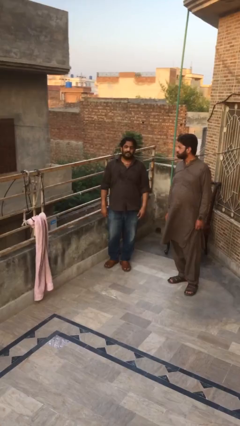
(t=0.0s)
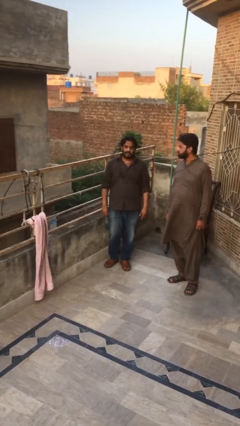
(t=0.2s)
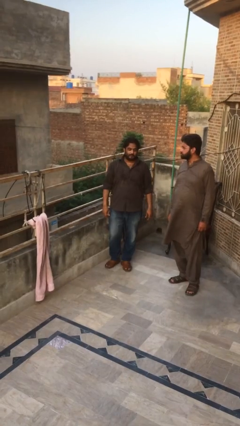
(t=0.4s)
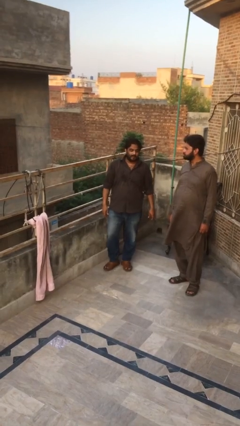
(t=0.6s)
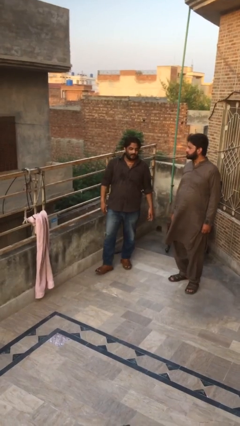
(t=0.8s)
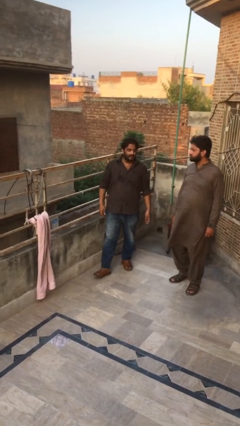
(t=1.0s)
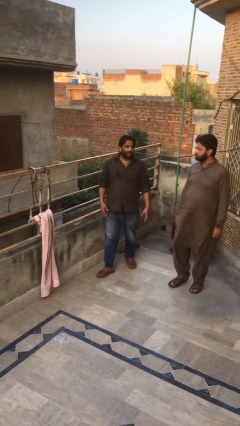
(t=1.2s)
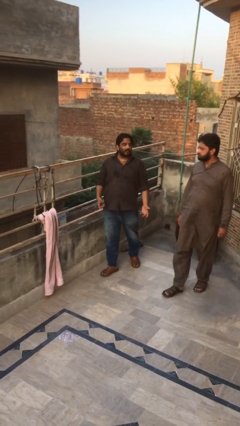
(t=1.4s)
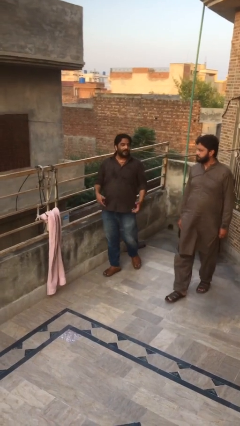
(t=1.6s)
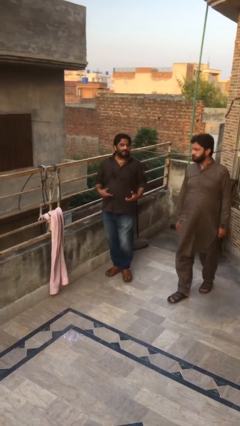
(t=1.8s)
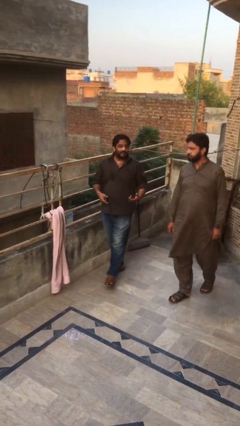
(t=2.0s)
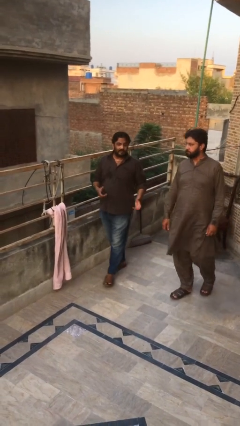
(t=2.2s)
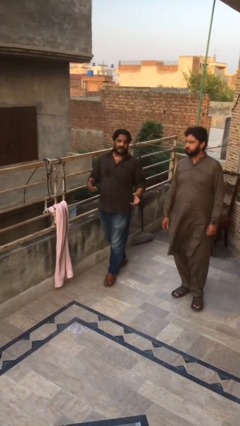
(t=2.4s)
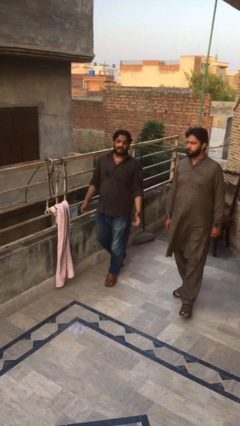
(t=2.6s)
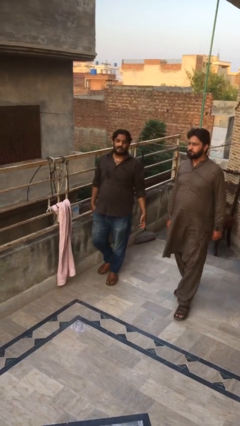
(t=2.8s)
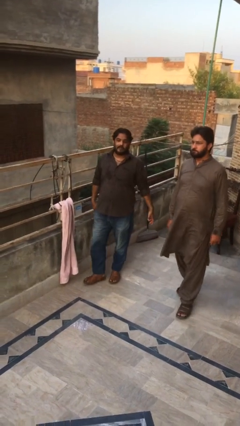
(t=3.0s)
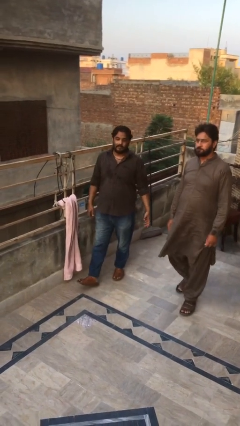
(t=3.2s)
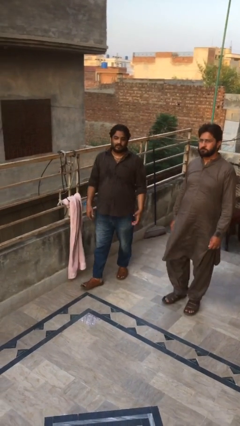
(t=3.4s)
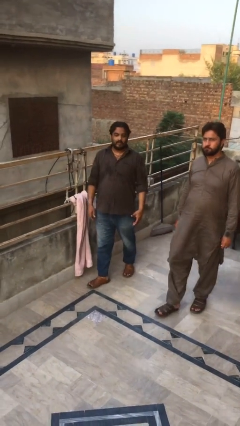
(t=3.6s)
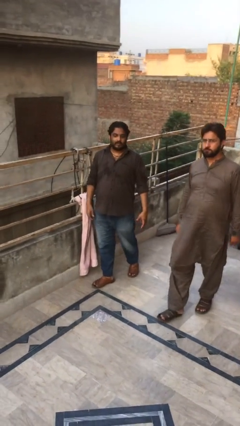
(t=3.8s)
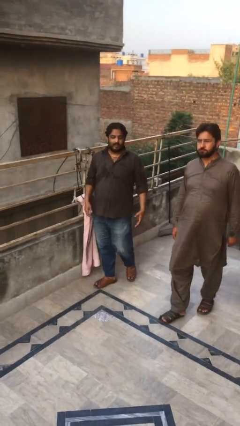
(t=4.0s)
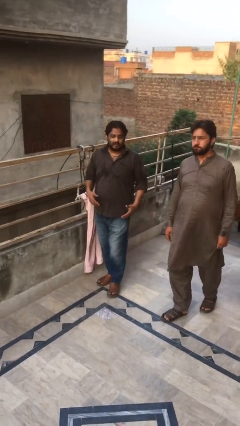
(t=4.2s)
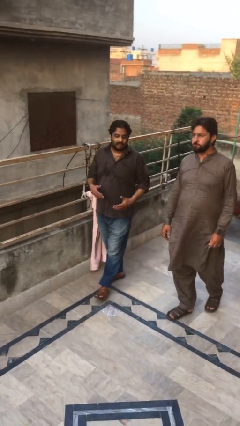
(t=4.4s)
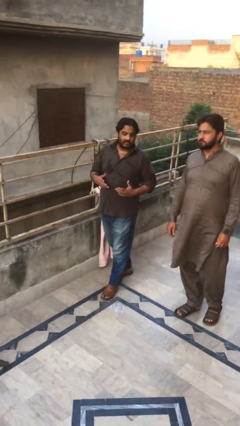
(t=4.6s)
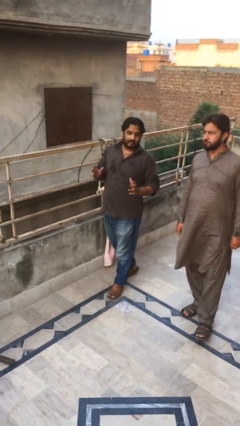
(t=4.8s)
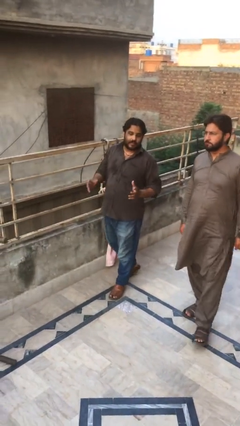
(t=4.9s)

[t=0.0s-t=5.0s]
person talks to person

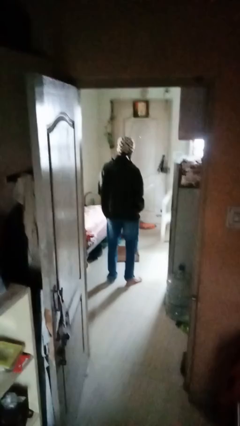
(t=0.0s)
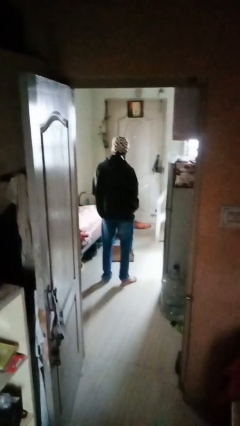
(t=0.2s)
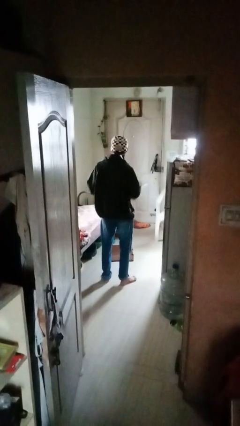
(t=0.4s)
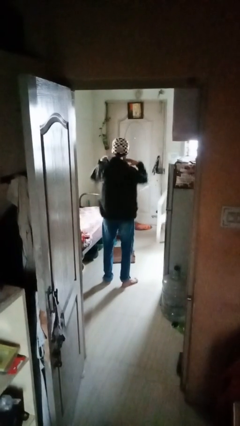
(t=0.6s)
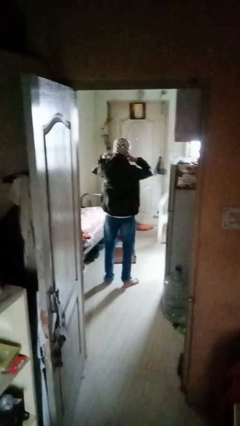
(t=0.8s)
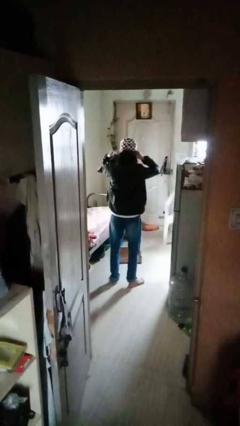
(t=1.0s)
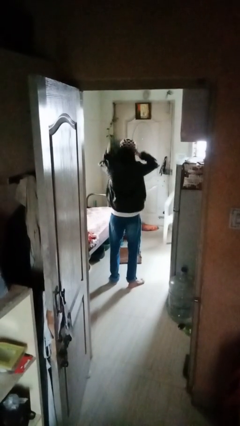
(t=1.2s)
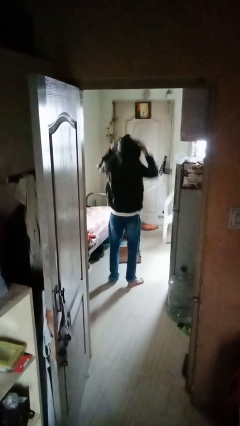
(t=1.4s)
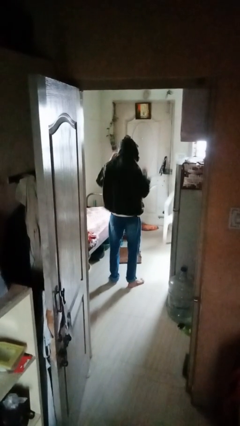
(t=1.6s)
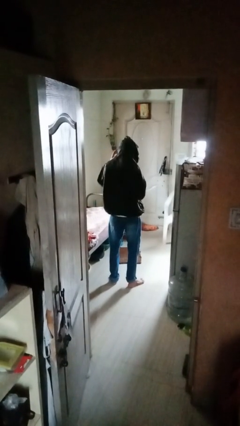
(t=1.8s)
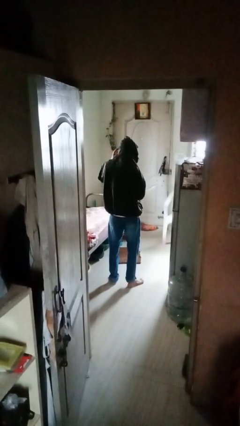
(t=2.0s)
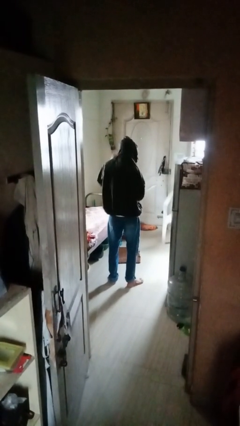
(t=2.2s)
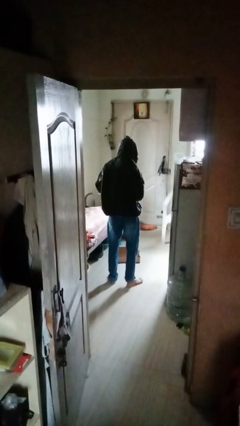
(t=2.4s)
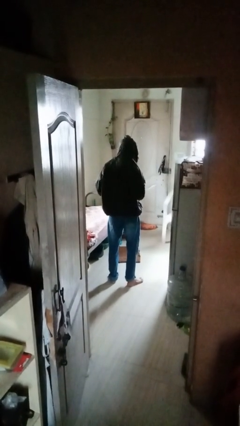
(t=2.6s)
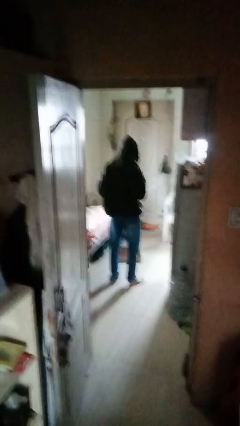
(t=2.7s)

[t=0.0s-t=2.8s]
person puts on hoodie

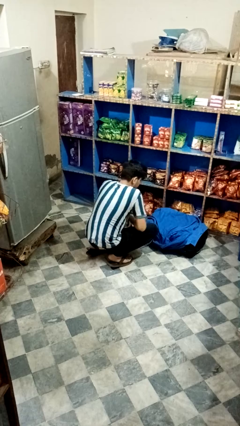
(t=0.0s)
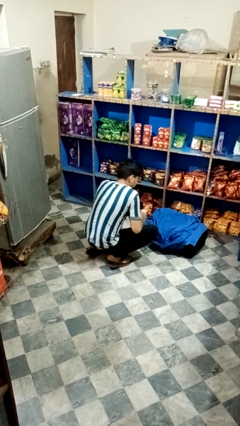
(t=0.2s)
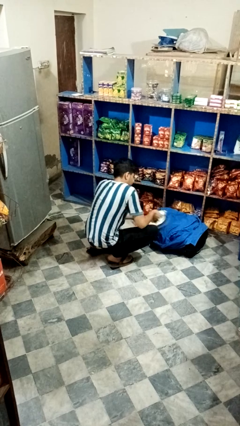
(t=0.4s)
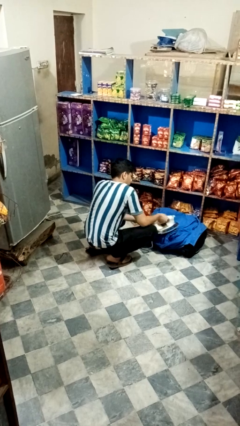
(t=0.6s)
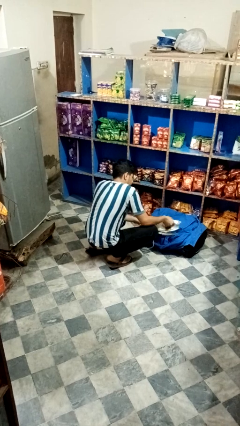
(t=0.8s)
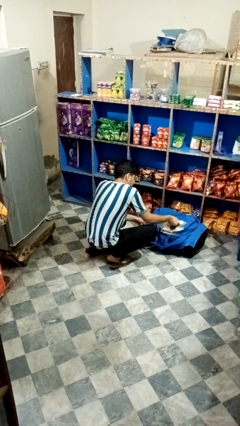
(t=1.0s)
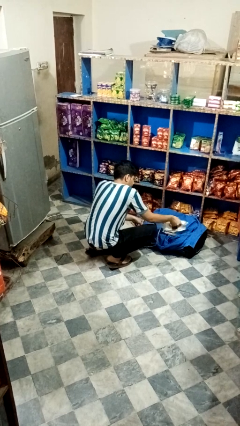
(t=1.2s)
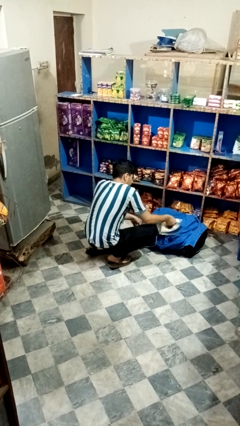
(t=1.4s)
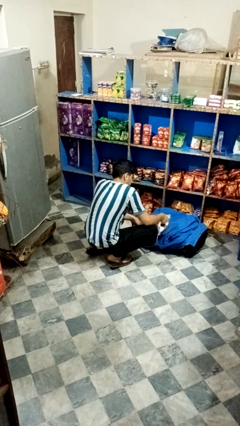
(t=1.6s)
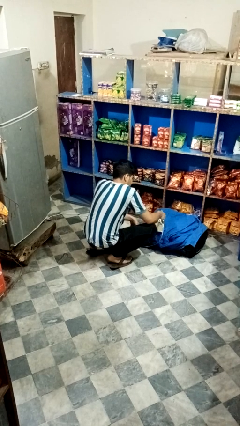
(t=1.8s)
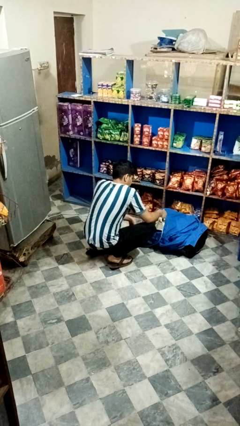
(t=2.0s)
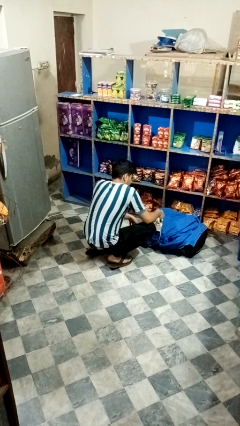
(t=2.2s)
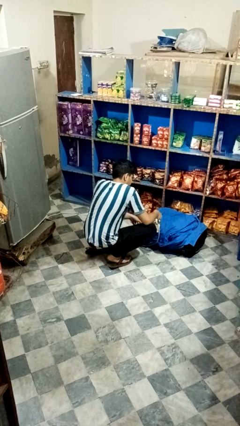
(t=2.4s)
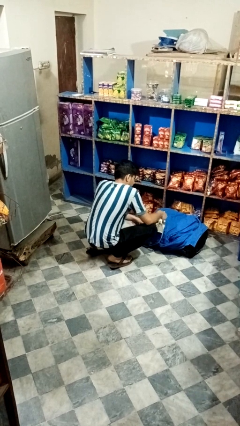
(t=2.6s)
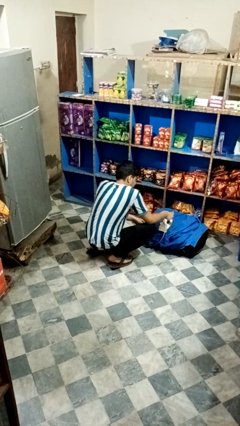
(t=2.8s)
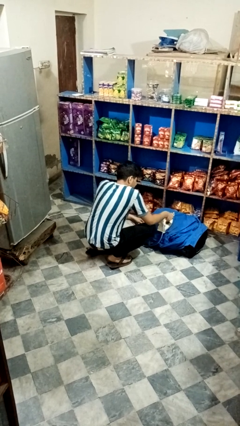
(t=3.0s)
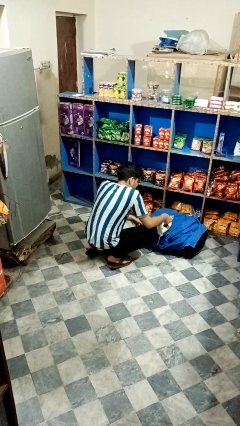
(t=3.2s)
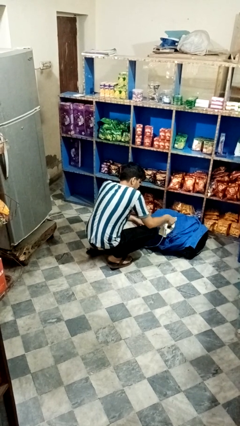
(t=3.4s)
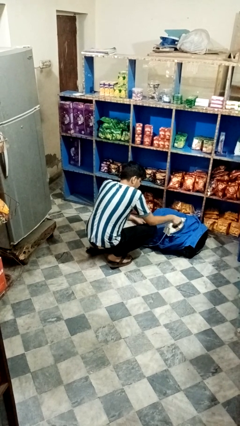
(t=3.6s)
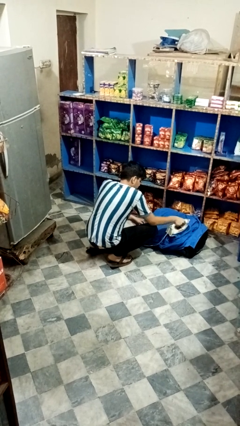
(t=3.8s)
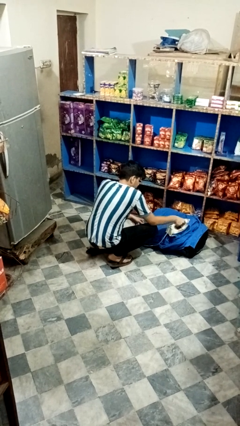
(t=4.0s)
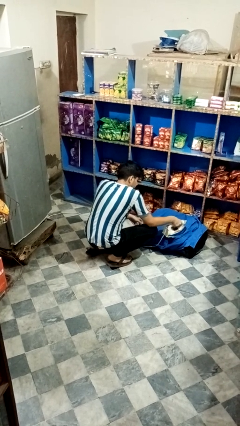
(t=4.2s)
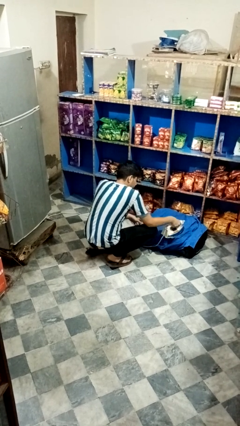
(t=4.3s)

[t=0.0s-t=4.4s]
person irons clothes

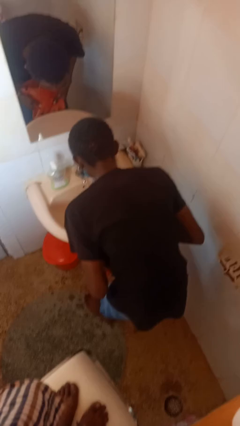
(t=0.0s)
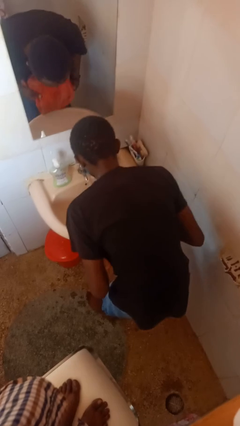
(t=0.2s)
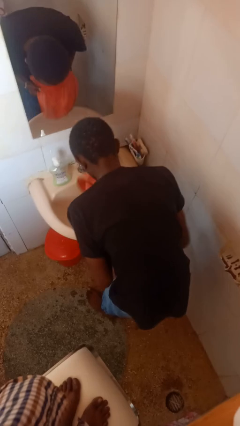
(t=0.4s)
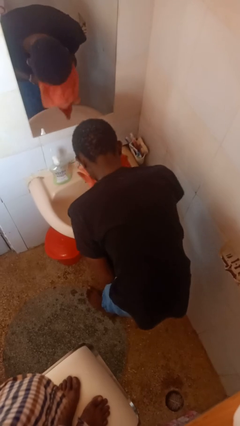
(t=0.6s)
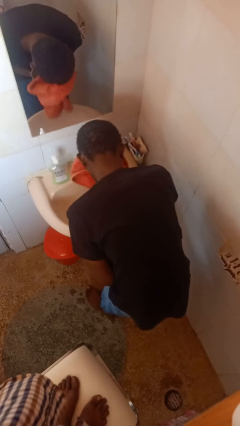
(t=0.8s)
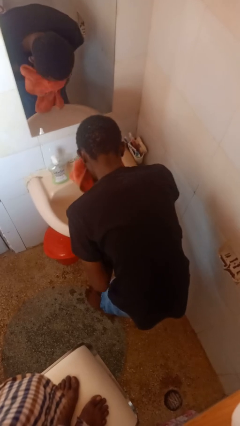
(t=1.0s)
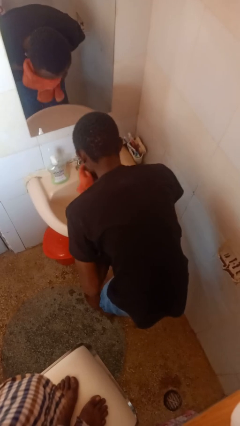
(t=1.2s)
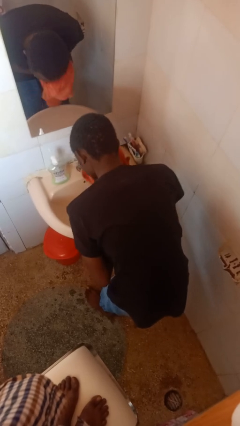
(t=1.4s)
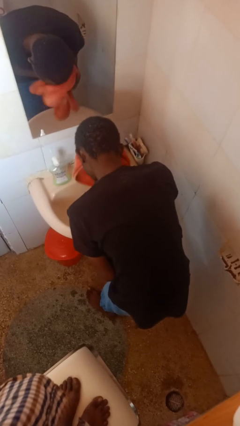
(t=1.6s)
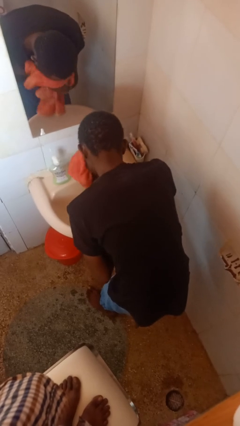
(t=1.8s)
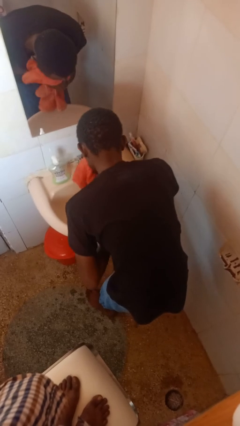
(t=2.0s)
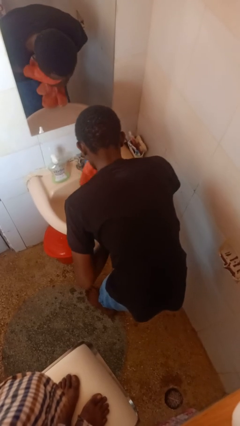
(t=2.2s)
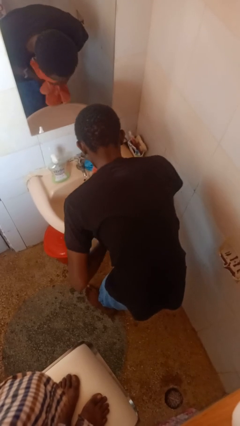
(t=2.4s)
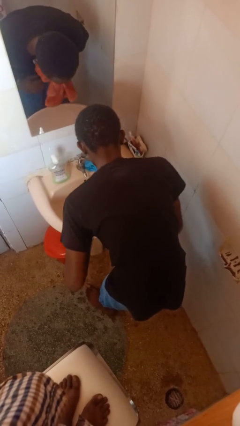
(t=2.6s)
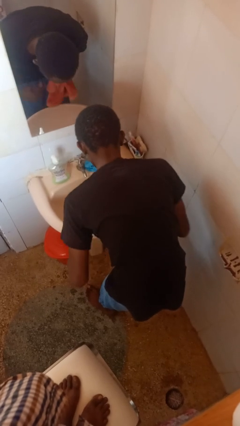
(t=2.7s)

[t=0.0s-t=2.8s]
person dries face with towel

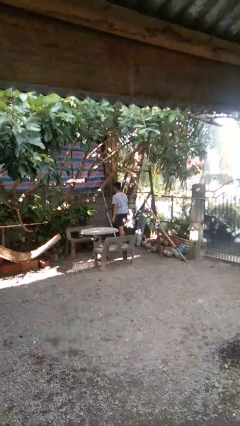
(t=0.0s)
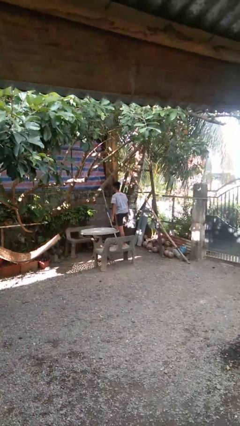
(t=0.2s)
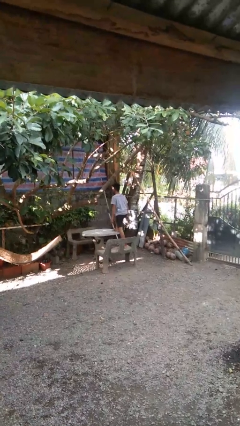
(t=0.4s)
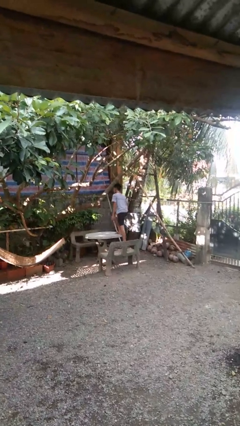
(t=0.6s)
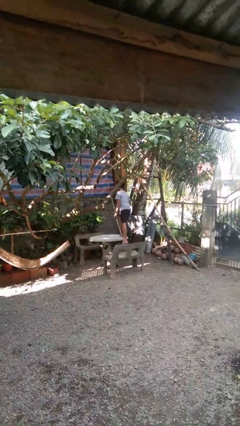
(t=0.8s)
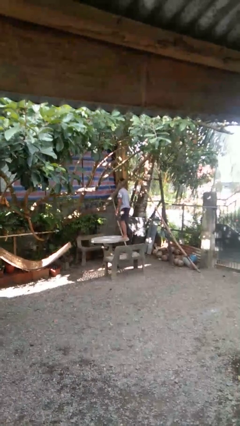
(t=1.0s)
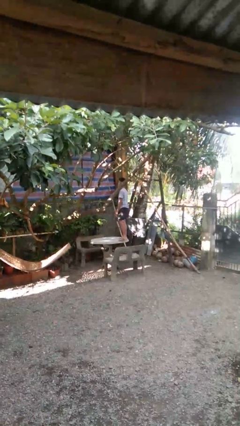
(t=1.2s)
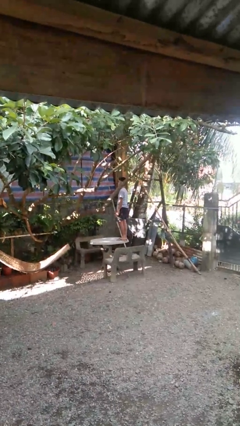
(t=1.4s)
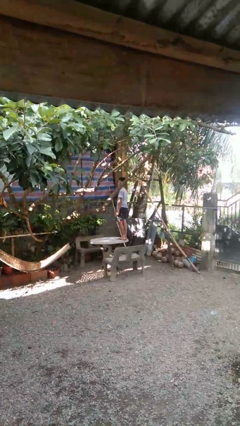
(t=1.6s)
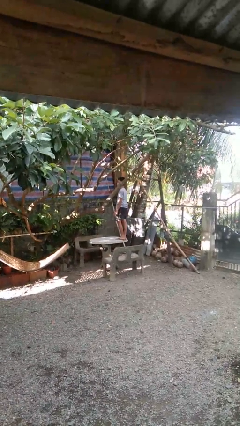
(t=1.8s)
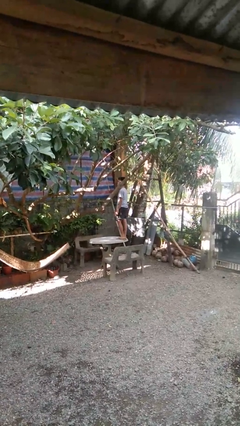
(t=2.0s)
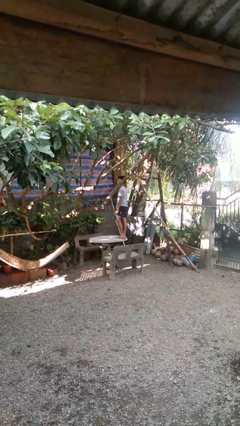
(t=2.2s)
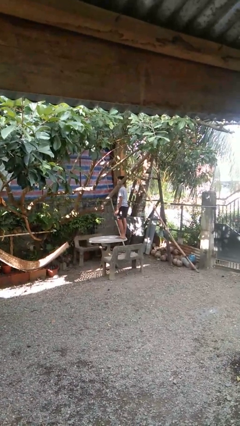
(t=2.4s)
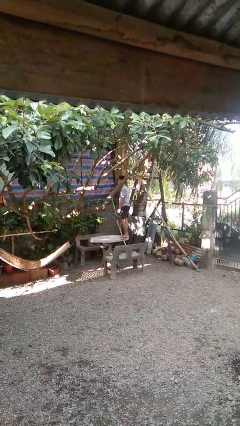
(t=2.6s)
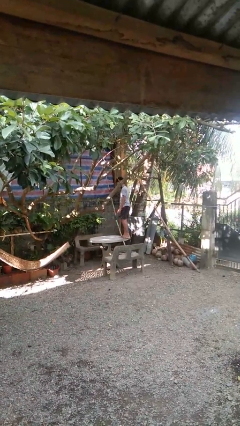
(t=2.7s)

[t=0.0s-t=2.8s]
person climbs on table
